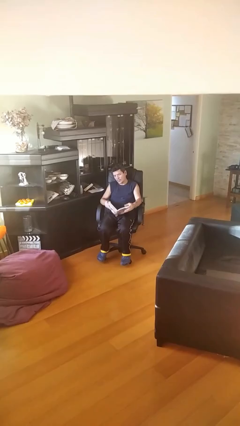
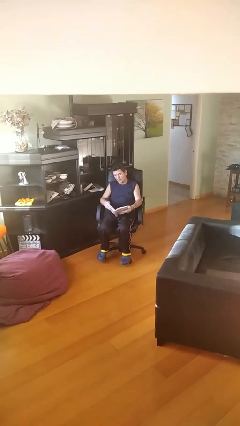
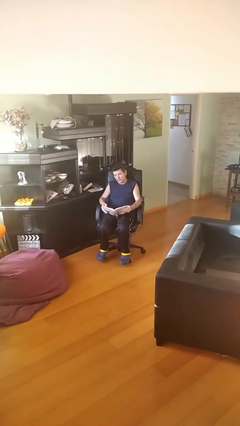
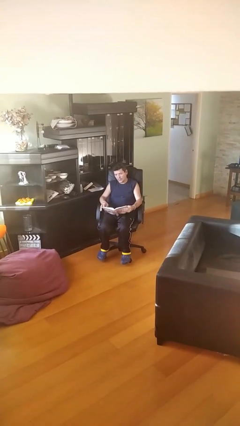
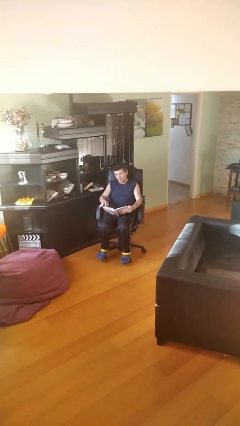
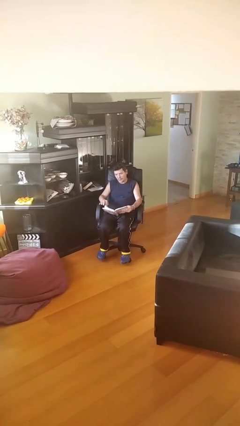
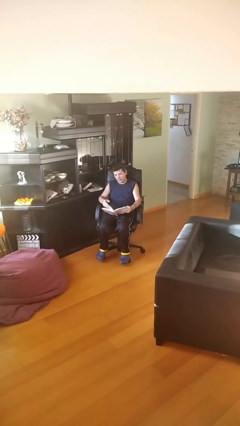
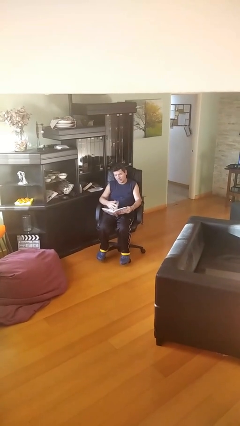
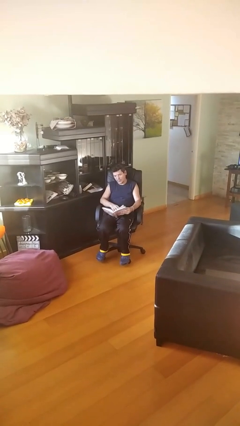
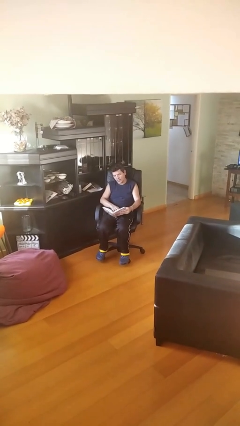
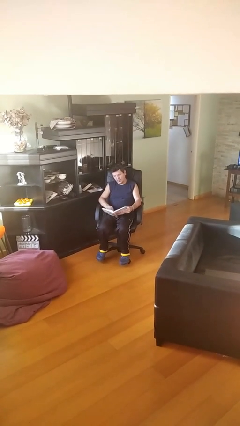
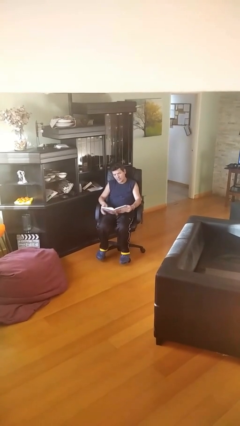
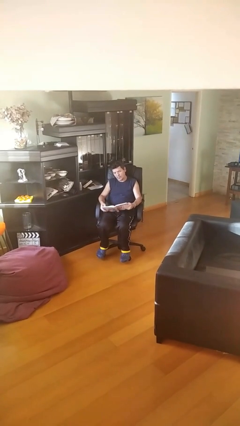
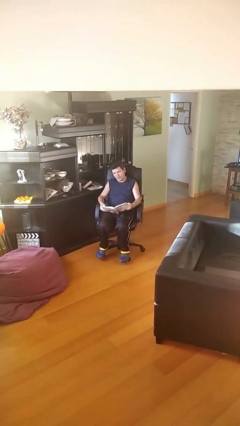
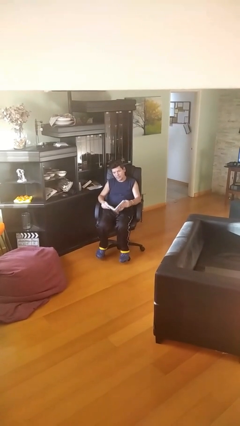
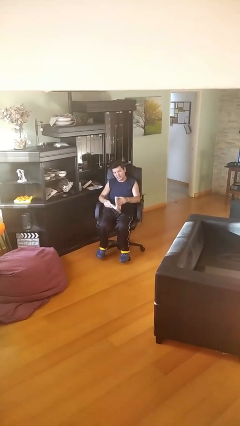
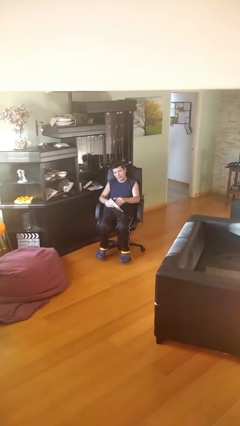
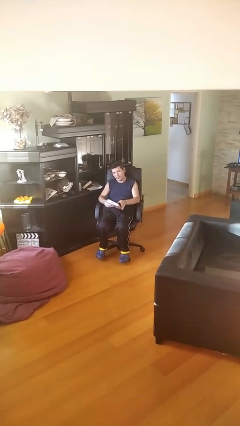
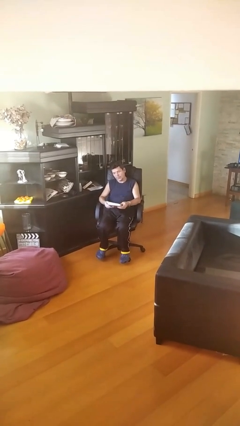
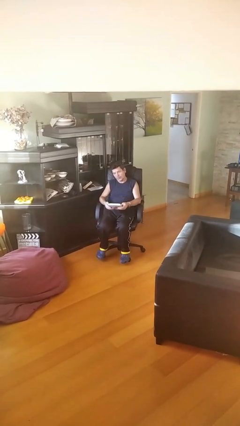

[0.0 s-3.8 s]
person reads document

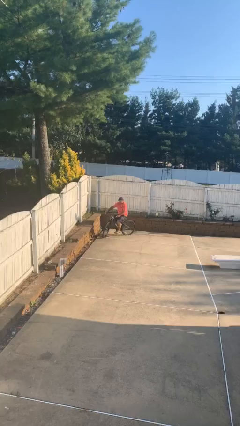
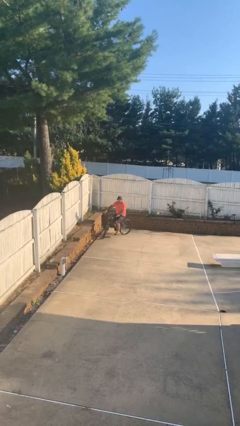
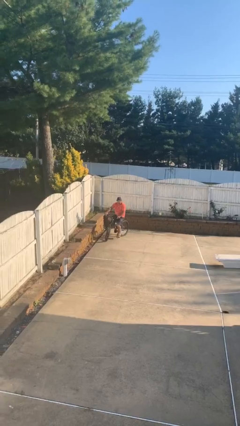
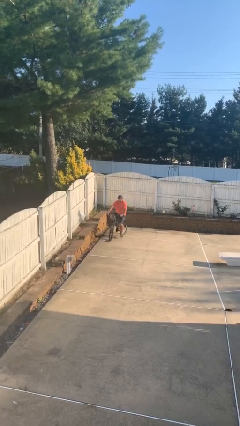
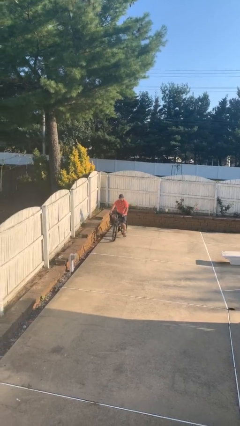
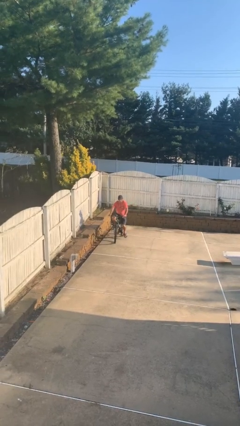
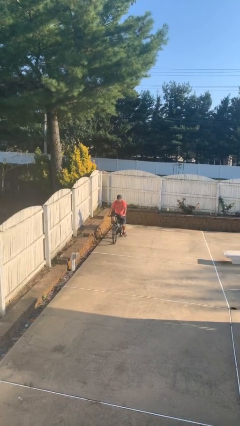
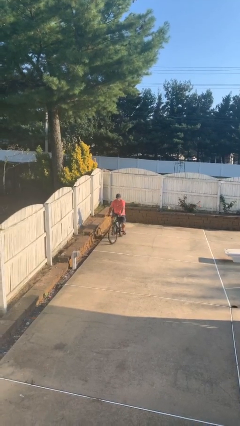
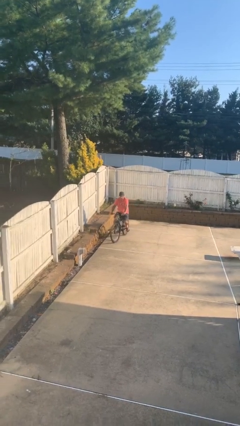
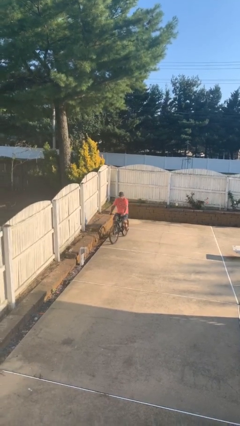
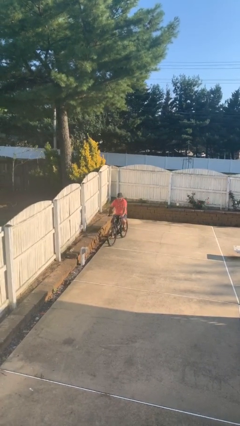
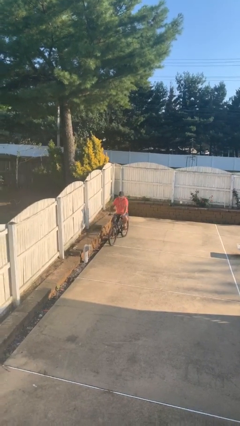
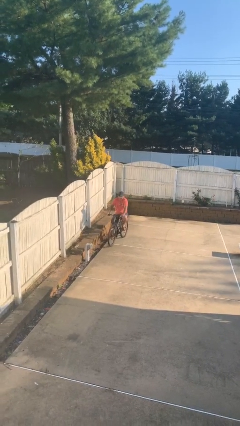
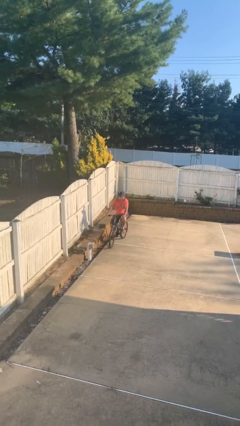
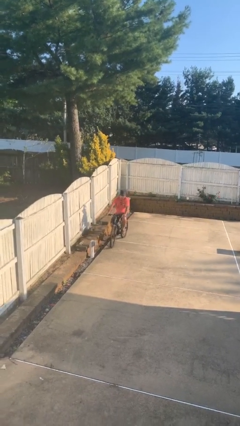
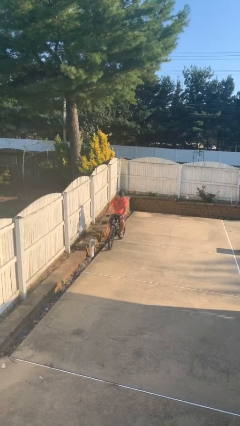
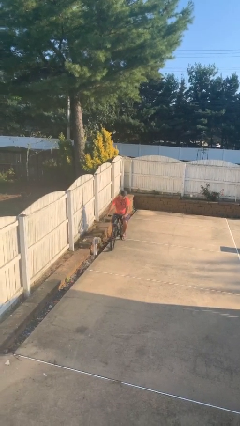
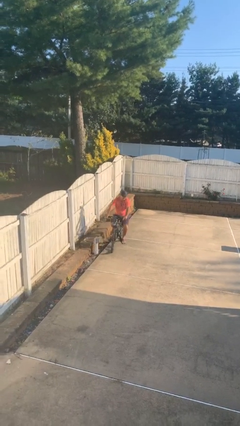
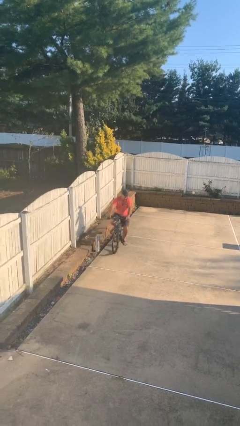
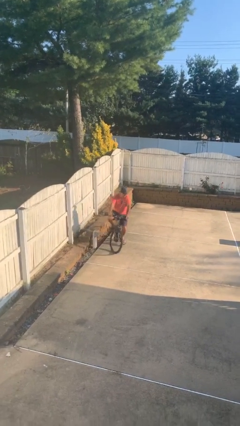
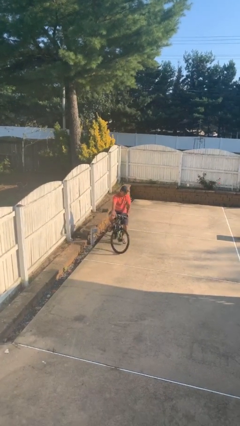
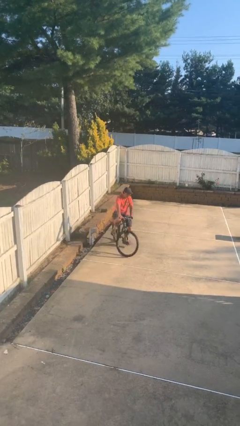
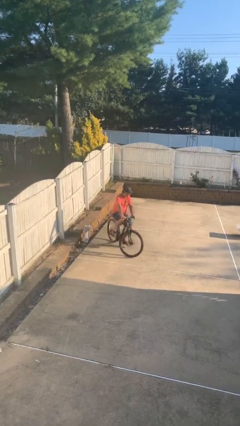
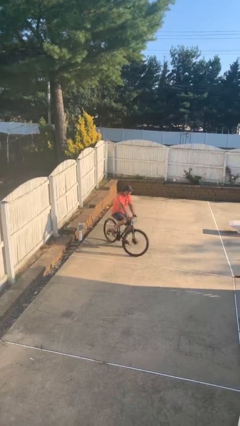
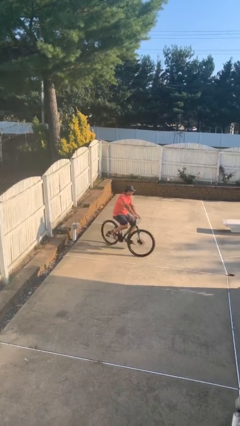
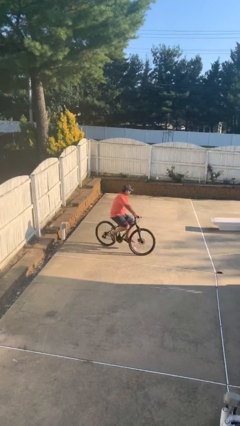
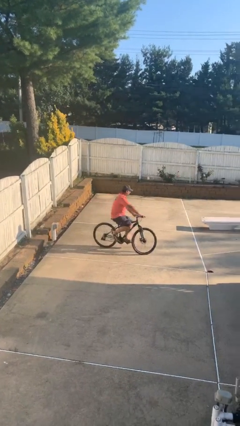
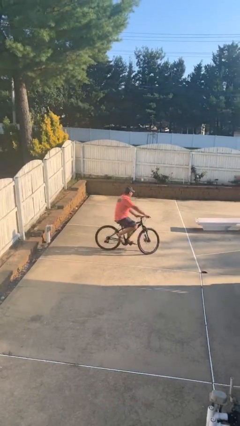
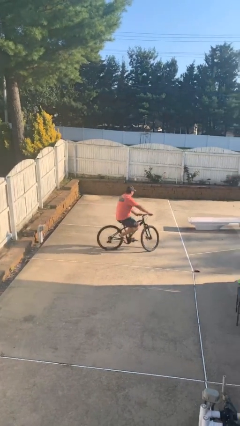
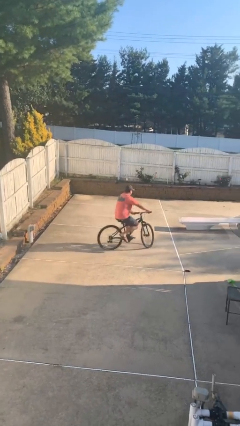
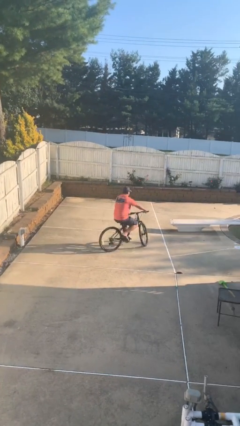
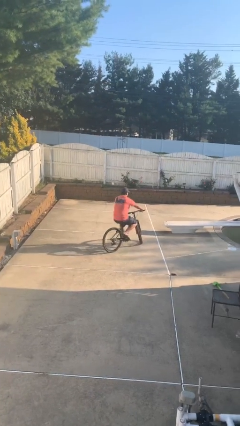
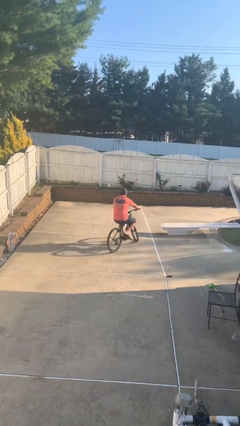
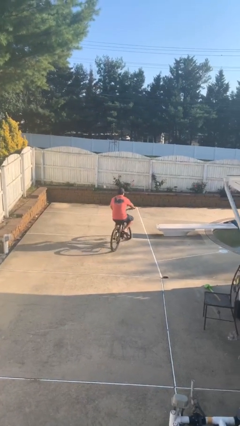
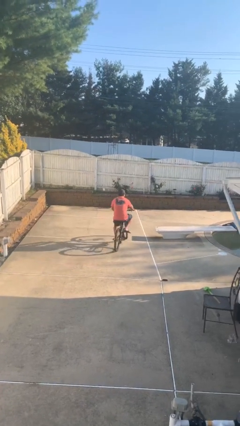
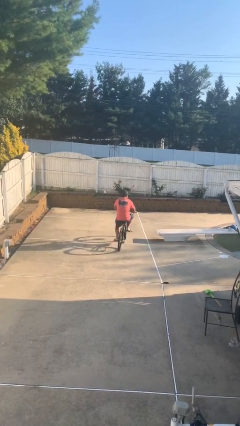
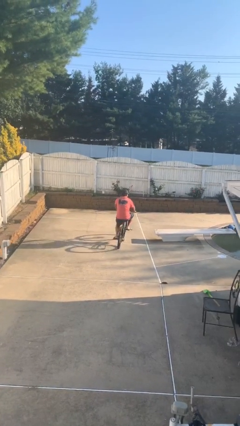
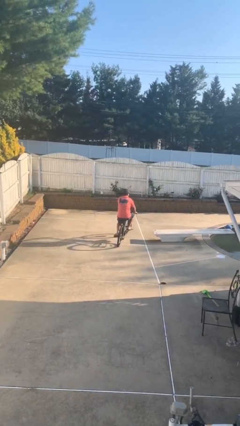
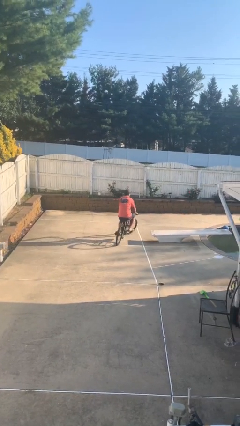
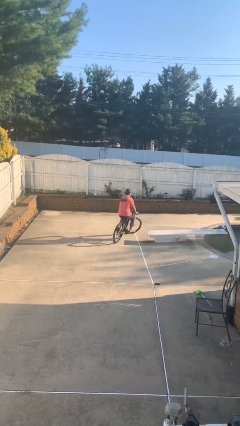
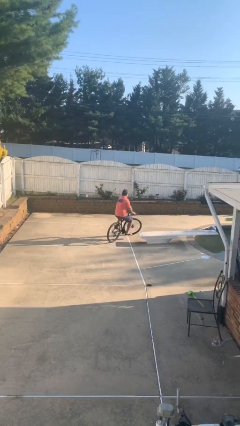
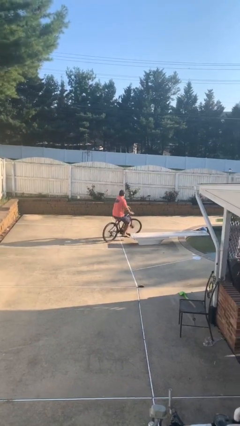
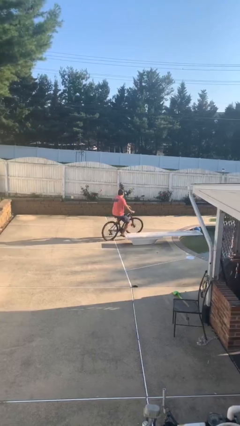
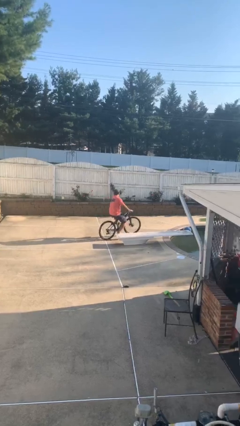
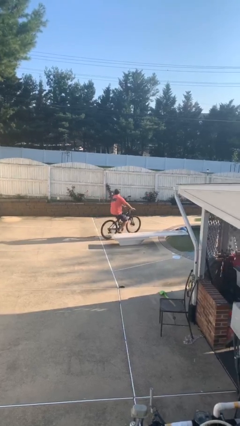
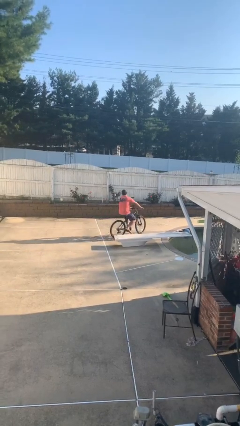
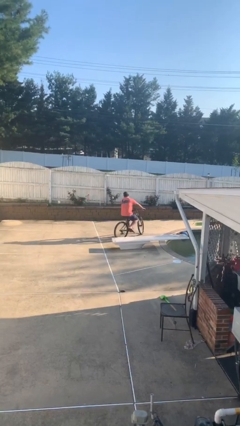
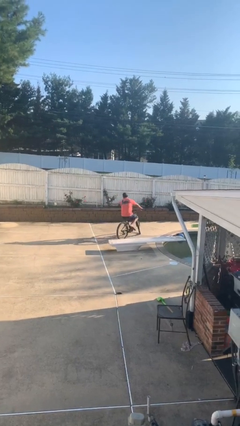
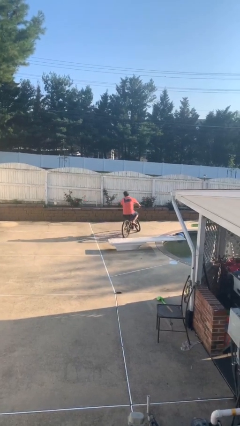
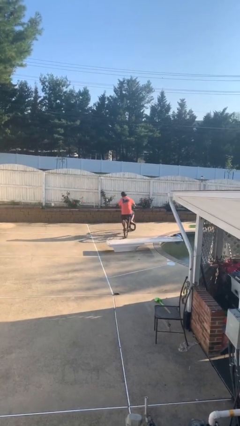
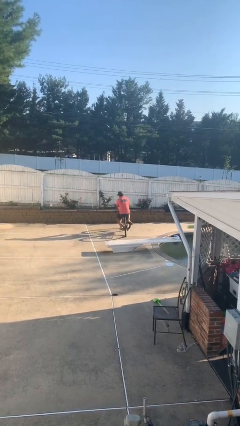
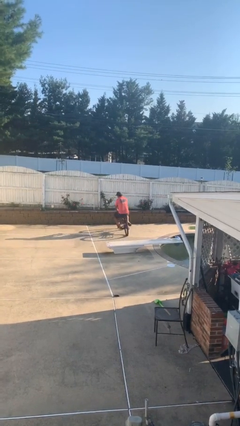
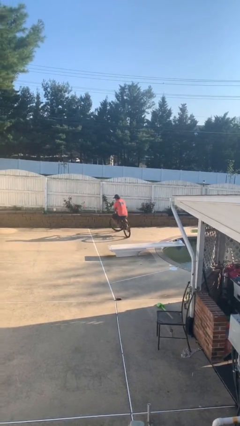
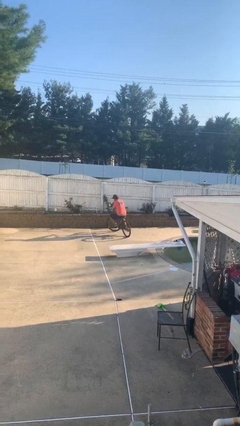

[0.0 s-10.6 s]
person rides bicycle

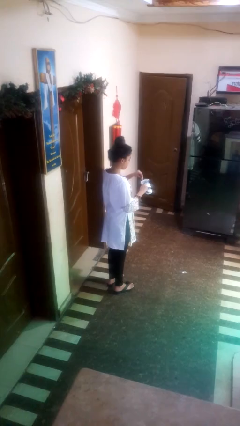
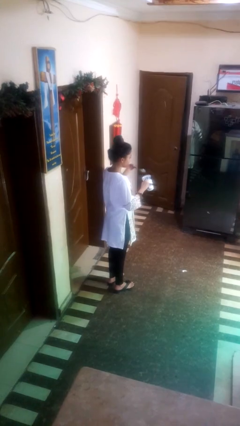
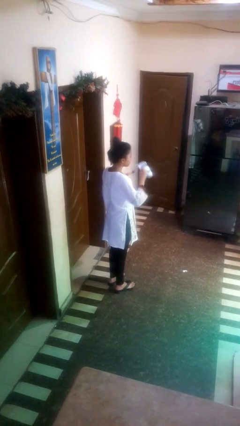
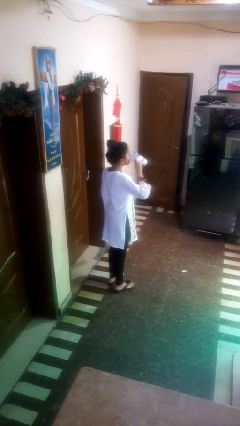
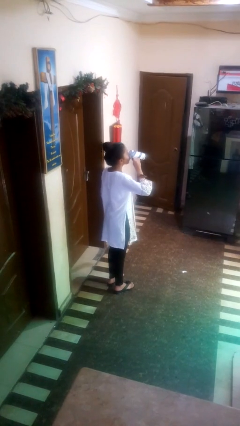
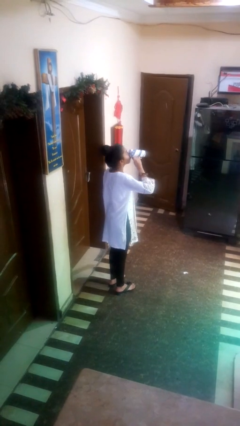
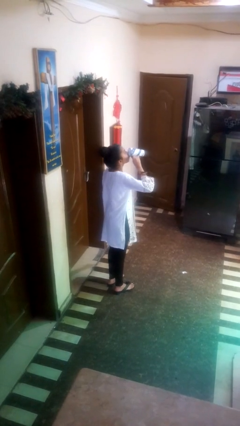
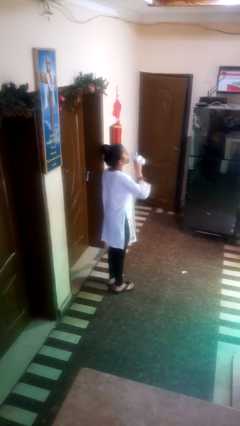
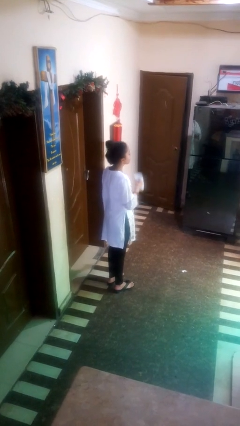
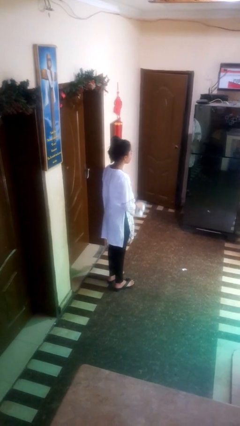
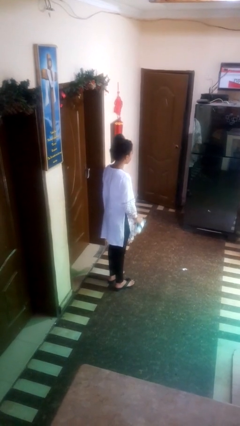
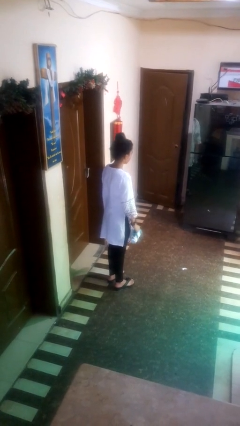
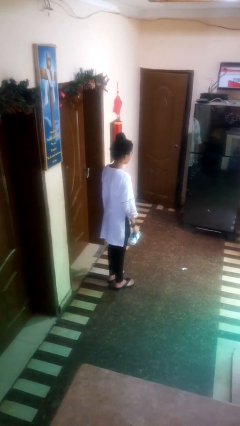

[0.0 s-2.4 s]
person drinks from mug

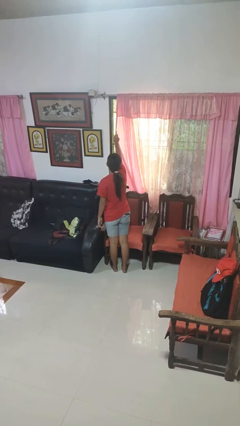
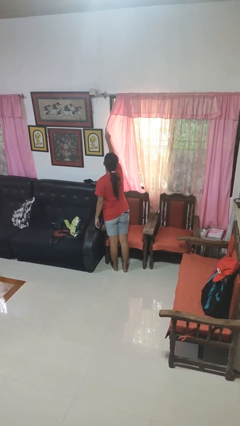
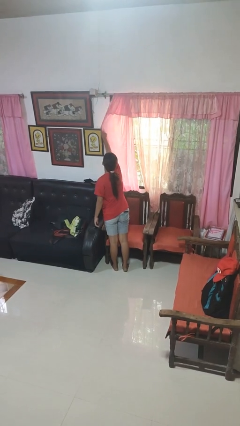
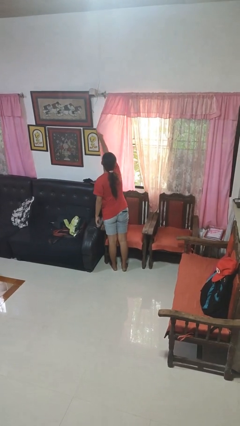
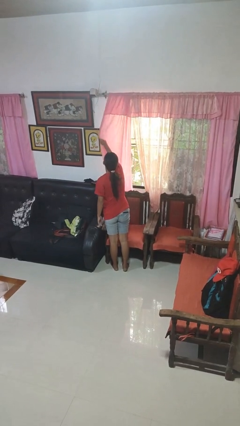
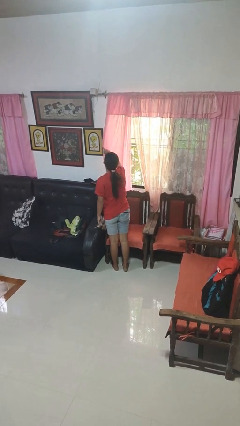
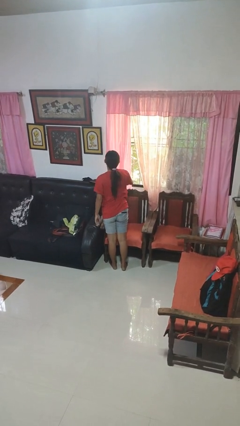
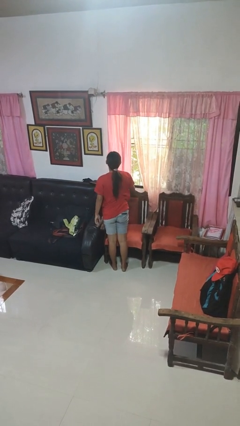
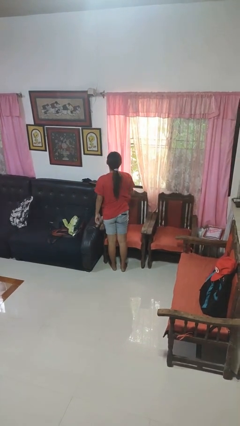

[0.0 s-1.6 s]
person closes curtains
